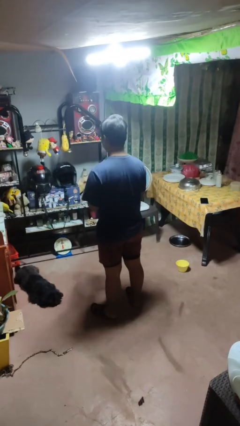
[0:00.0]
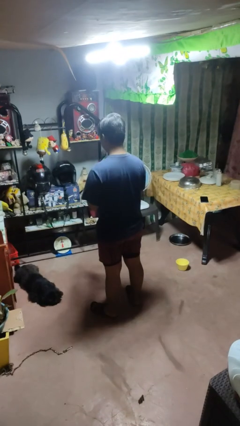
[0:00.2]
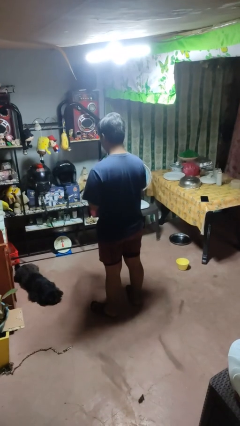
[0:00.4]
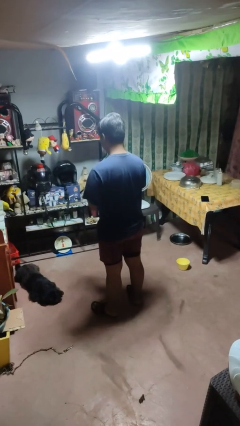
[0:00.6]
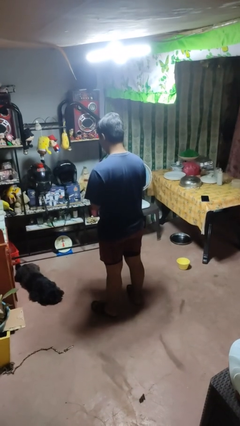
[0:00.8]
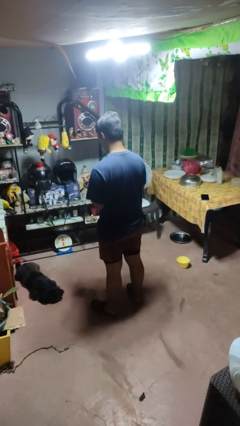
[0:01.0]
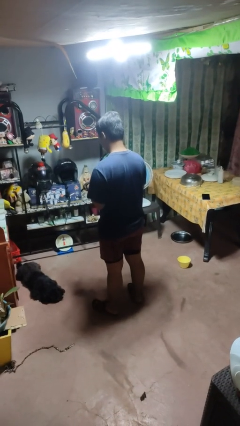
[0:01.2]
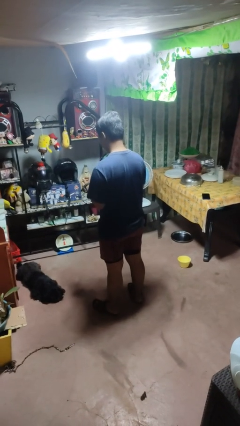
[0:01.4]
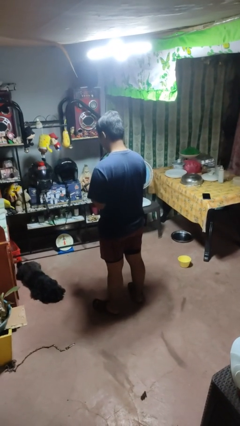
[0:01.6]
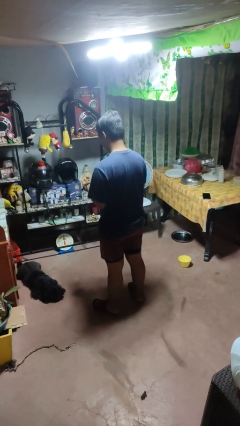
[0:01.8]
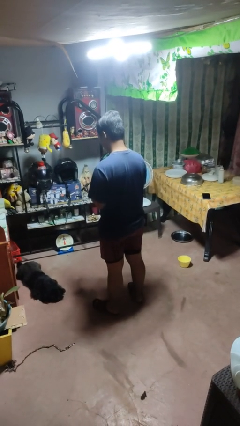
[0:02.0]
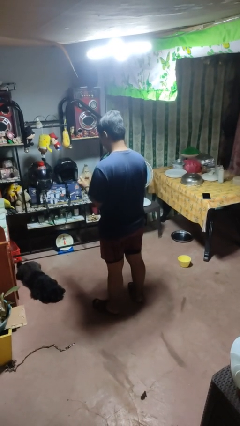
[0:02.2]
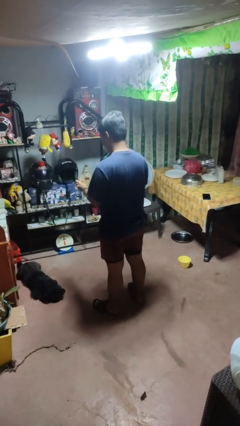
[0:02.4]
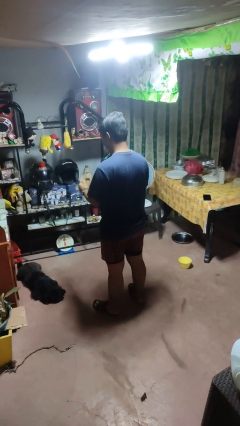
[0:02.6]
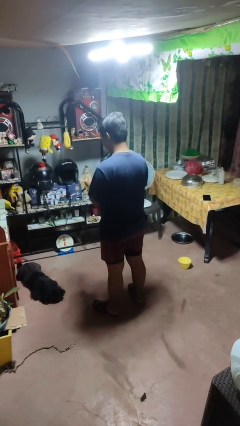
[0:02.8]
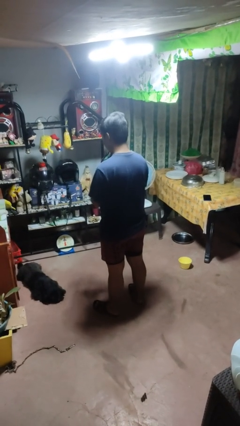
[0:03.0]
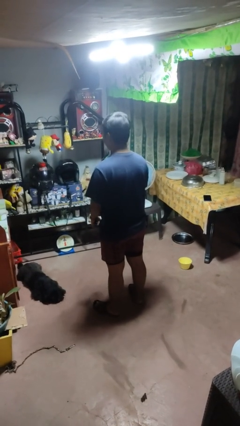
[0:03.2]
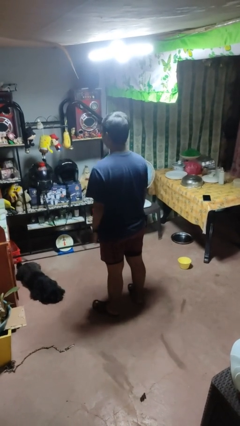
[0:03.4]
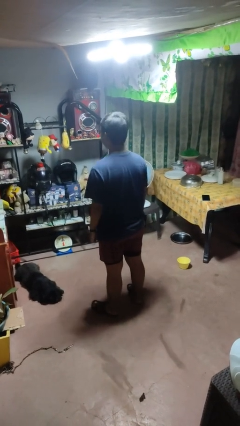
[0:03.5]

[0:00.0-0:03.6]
person puts on wristwatch

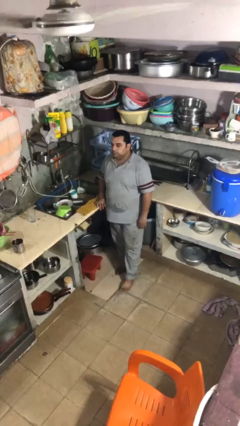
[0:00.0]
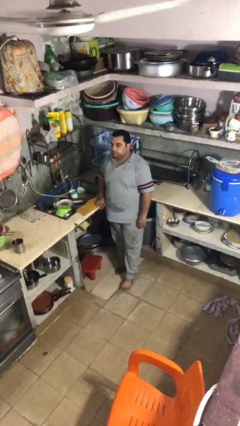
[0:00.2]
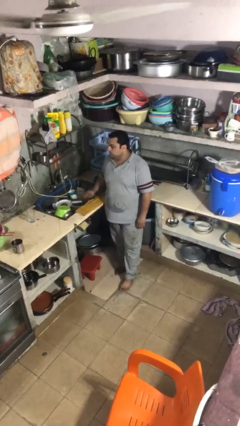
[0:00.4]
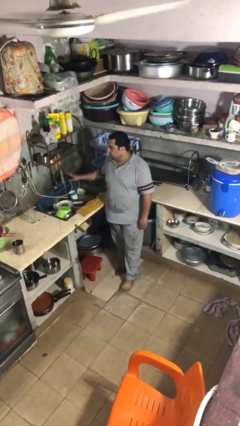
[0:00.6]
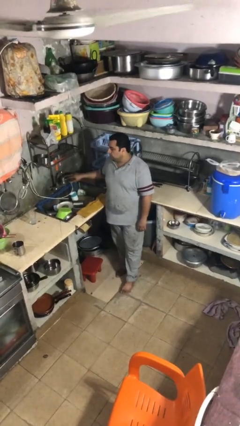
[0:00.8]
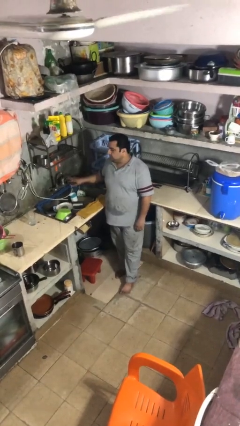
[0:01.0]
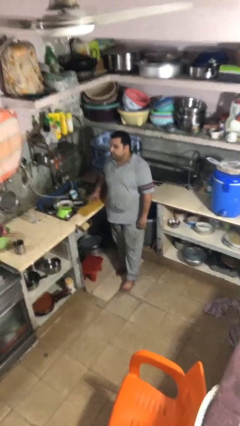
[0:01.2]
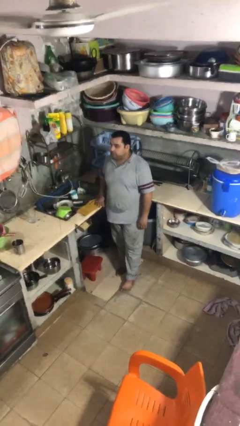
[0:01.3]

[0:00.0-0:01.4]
person turns off faucet

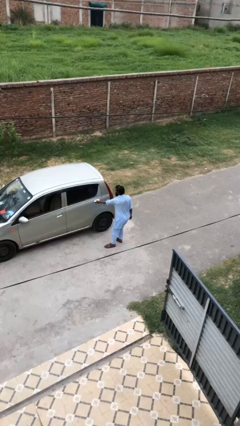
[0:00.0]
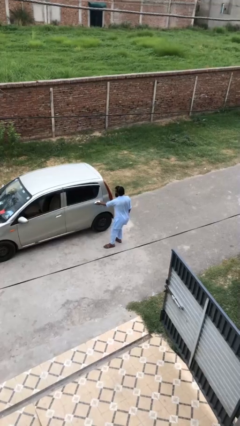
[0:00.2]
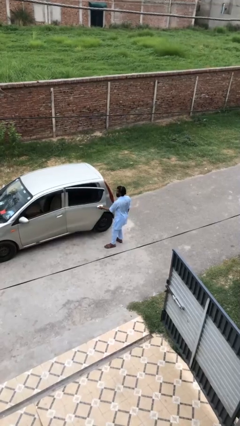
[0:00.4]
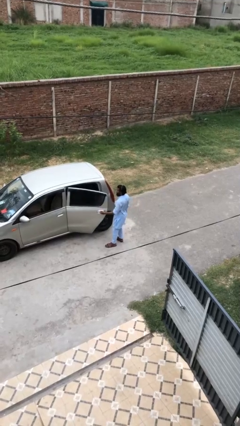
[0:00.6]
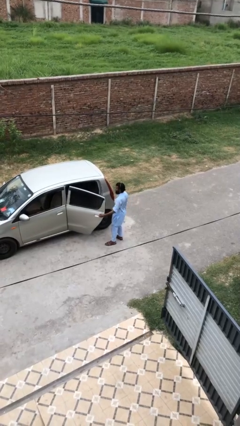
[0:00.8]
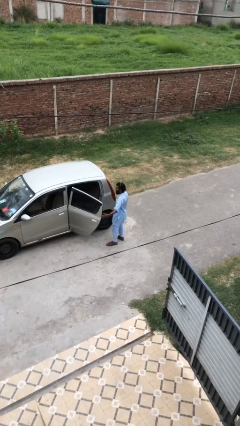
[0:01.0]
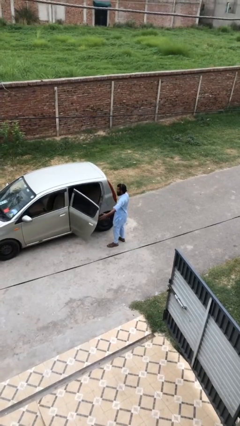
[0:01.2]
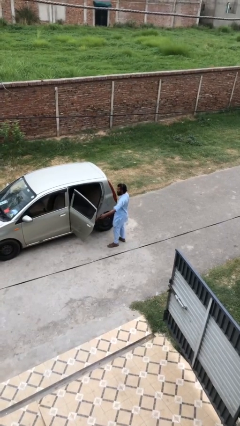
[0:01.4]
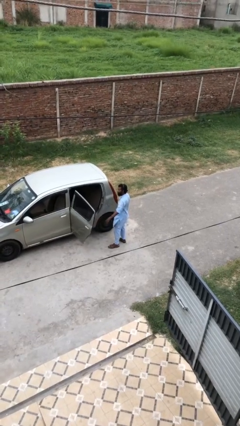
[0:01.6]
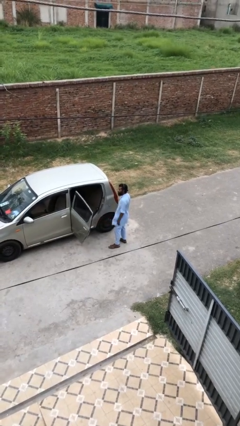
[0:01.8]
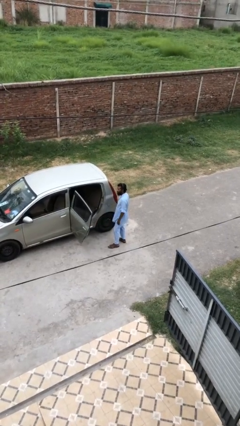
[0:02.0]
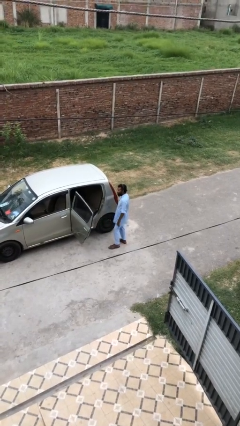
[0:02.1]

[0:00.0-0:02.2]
person opens car door

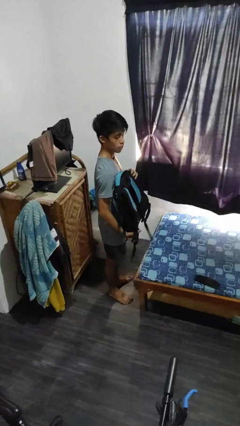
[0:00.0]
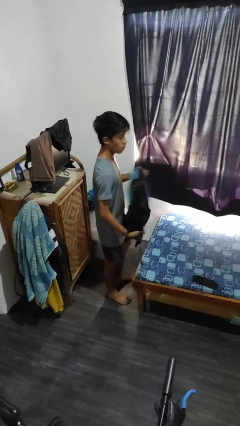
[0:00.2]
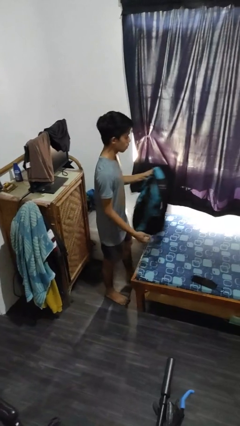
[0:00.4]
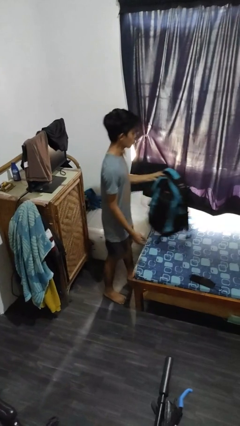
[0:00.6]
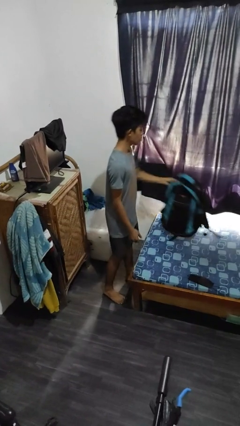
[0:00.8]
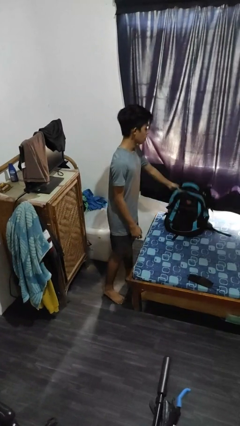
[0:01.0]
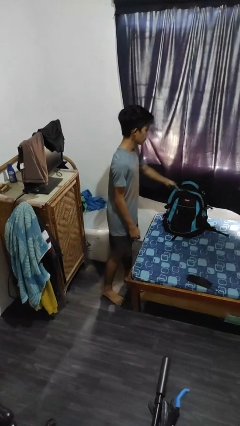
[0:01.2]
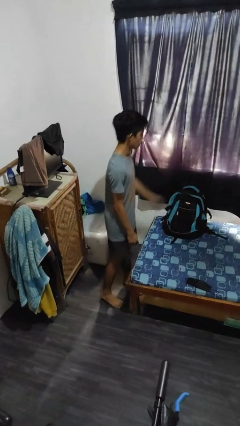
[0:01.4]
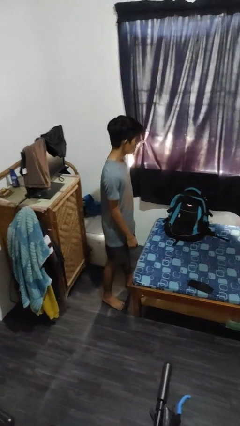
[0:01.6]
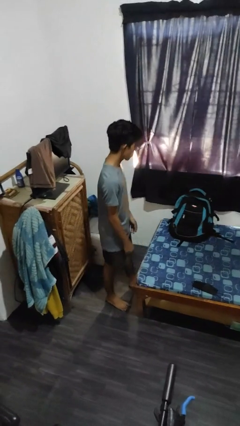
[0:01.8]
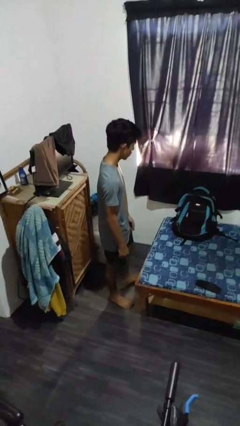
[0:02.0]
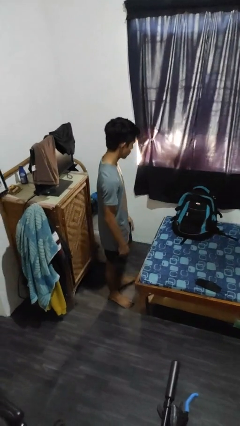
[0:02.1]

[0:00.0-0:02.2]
person puts down object on bed

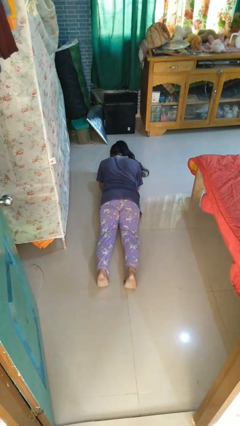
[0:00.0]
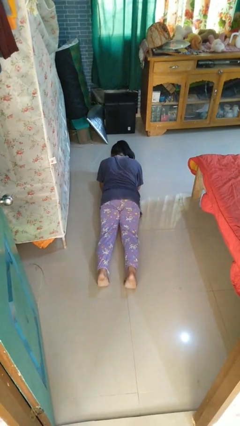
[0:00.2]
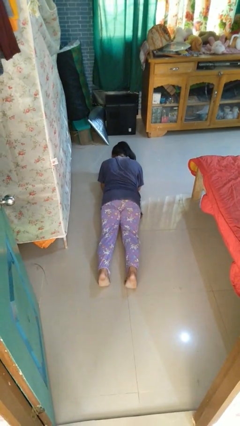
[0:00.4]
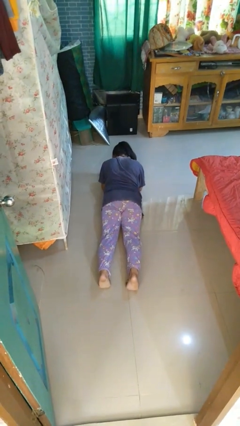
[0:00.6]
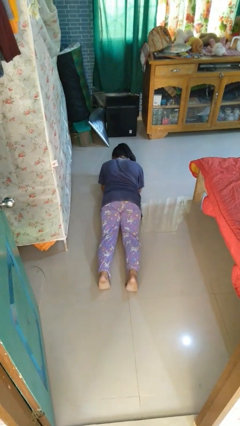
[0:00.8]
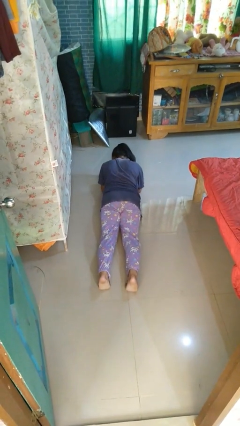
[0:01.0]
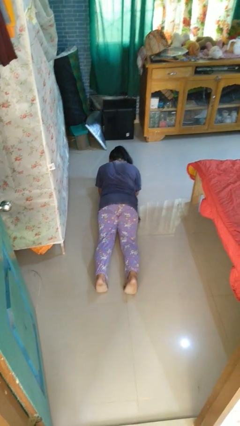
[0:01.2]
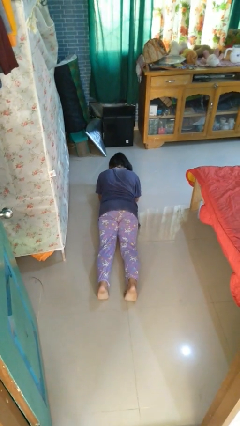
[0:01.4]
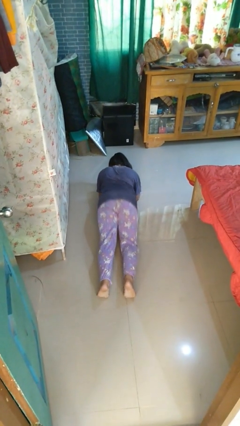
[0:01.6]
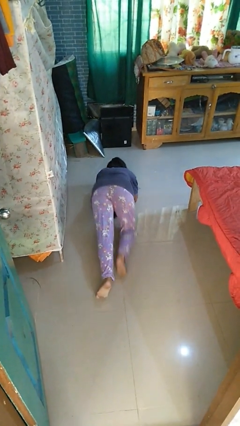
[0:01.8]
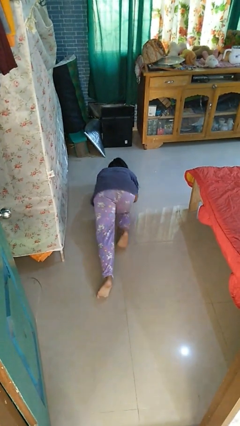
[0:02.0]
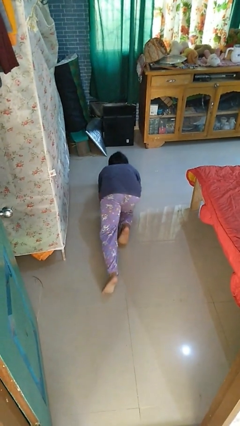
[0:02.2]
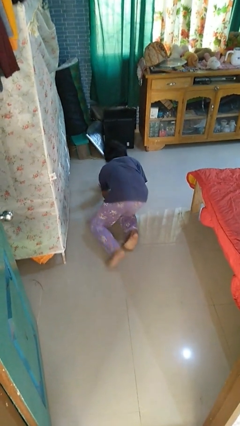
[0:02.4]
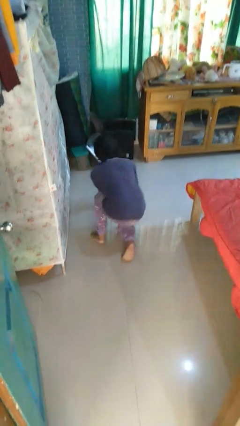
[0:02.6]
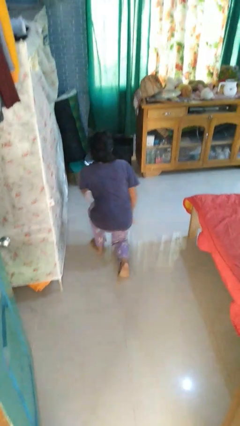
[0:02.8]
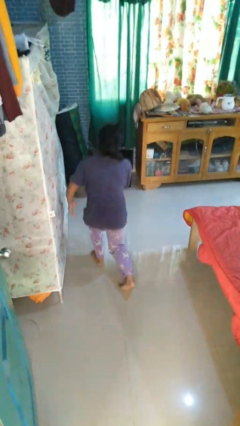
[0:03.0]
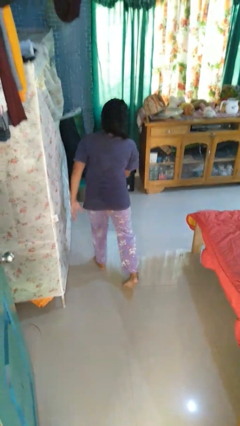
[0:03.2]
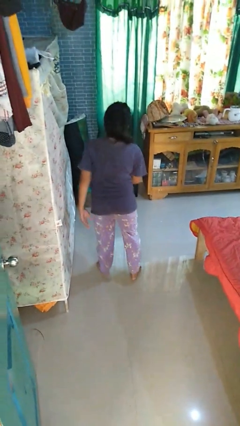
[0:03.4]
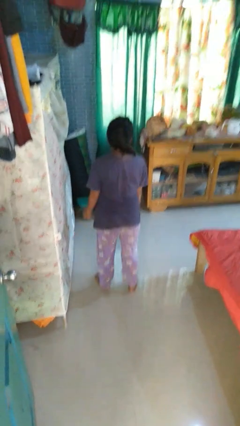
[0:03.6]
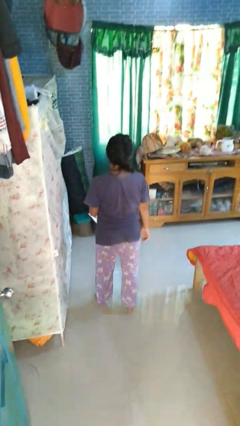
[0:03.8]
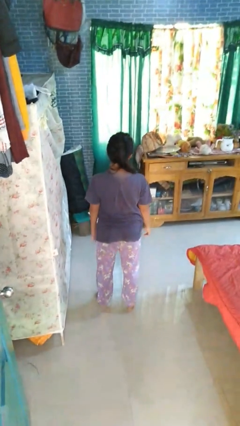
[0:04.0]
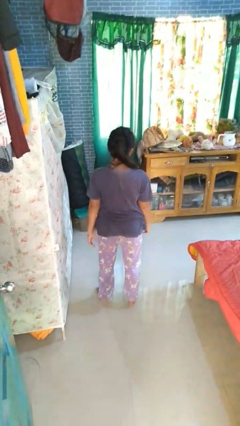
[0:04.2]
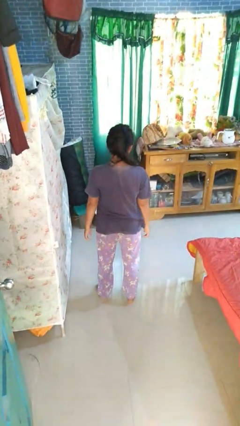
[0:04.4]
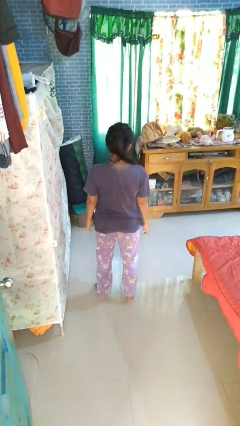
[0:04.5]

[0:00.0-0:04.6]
person stands up from floor

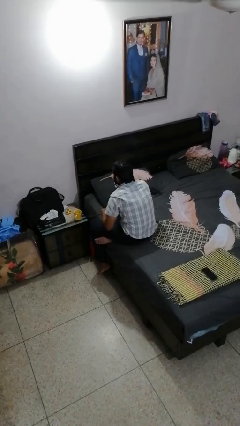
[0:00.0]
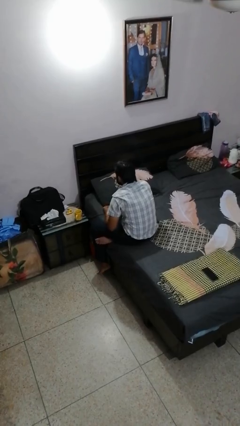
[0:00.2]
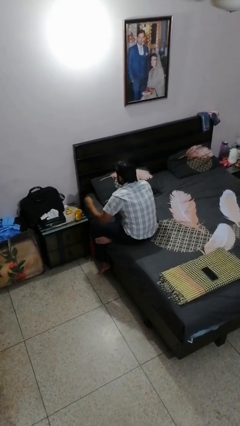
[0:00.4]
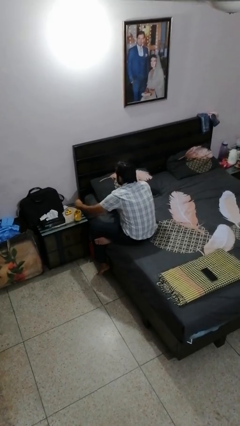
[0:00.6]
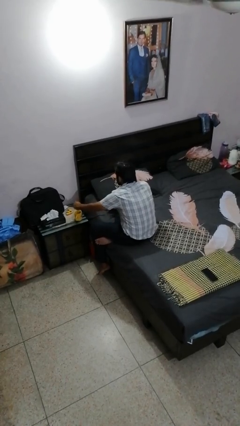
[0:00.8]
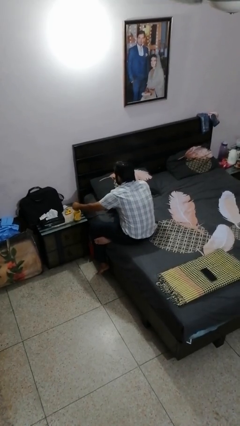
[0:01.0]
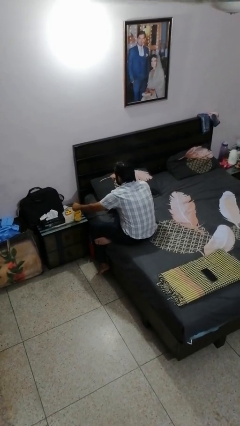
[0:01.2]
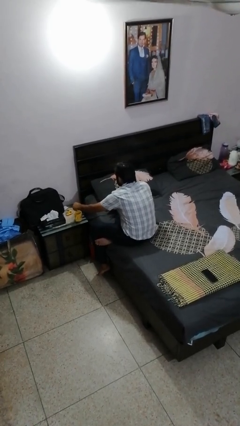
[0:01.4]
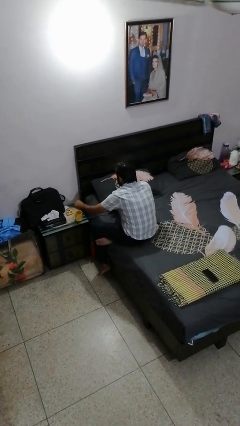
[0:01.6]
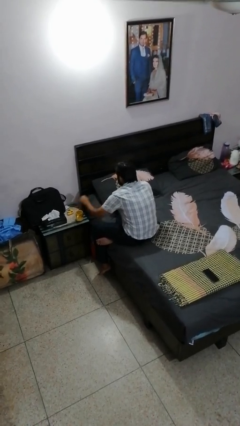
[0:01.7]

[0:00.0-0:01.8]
person stirs mug

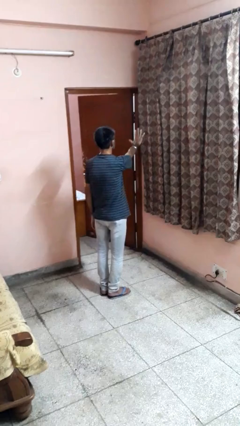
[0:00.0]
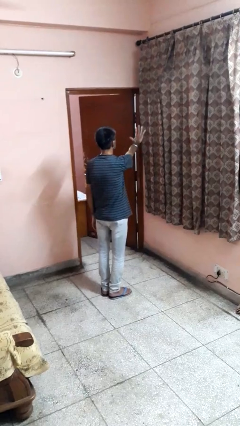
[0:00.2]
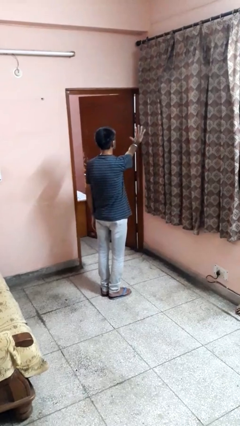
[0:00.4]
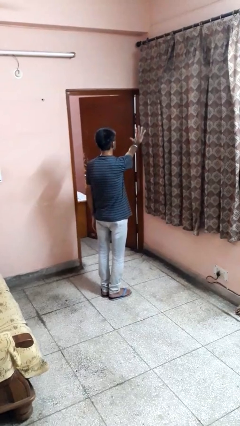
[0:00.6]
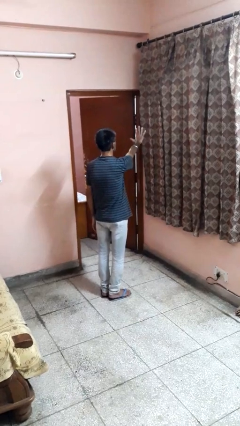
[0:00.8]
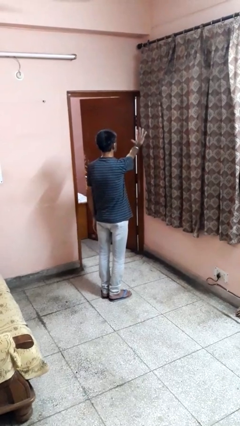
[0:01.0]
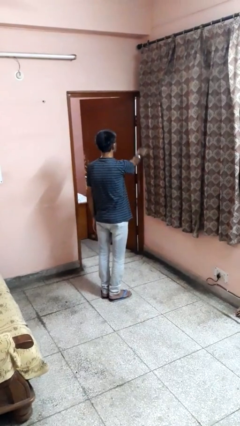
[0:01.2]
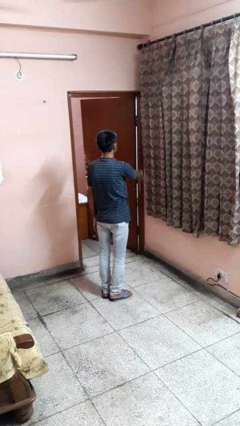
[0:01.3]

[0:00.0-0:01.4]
person gestures number five
